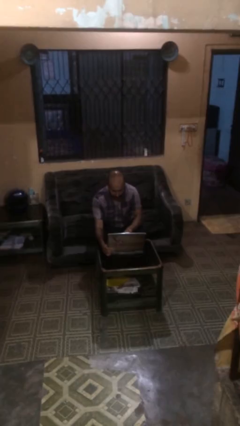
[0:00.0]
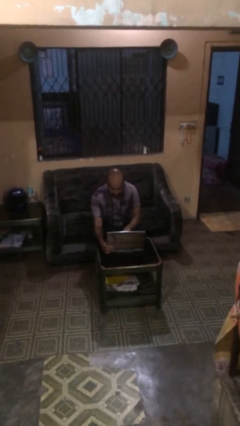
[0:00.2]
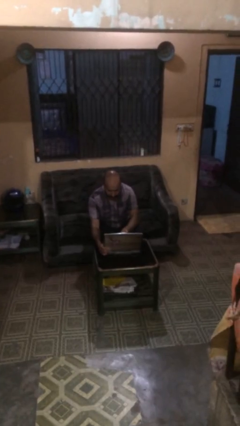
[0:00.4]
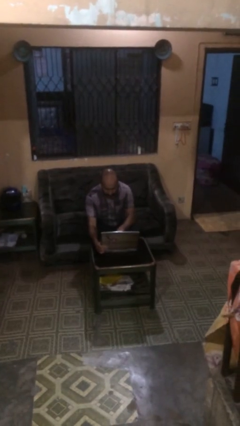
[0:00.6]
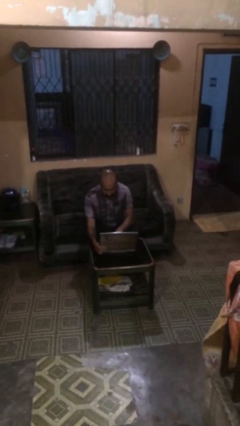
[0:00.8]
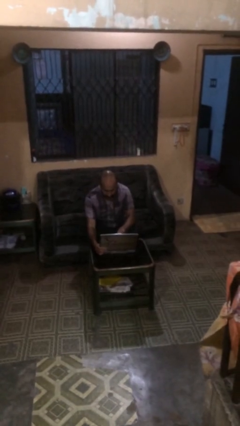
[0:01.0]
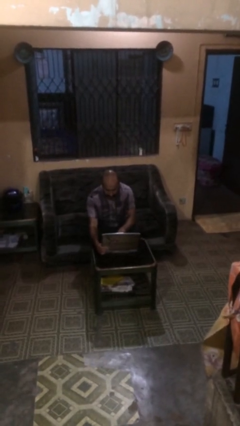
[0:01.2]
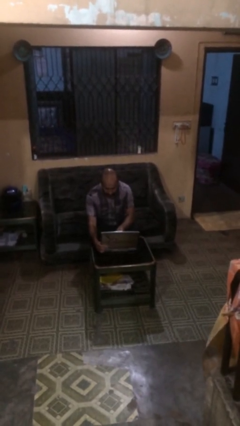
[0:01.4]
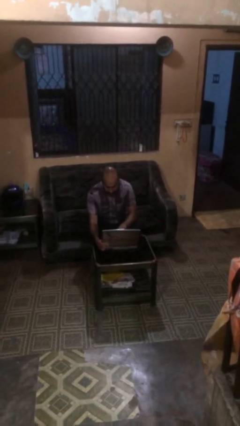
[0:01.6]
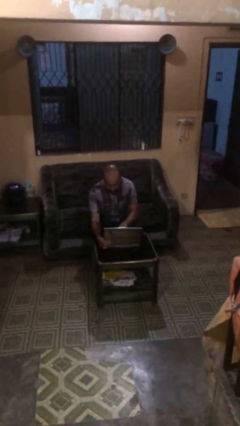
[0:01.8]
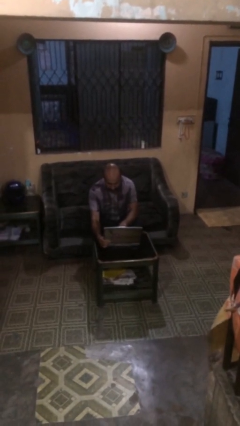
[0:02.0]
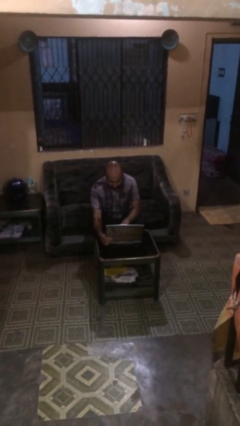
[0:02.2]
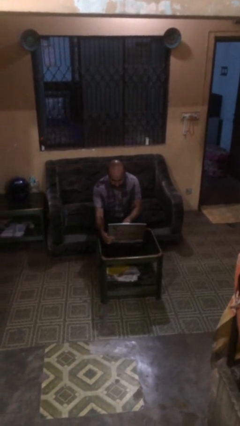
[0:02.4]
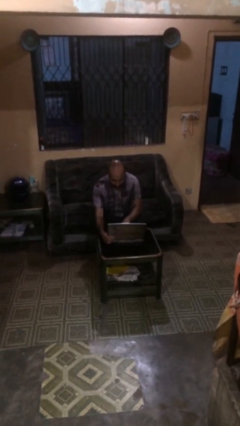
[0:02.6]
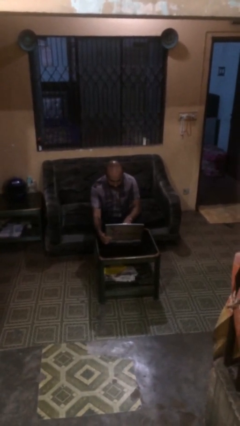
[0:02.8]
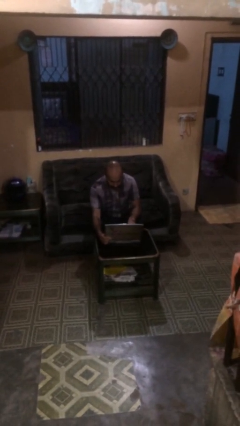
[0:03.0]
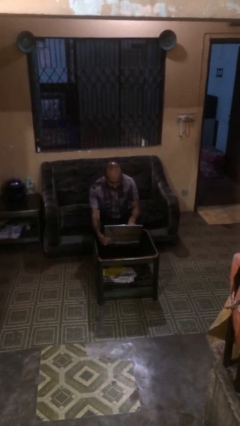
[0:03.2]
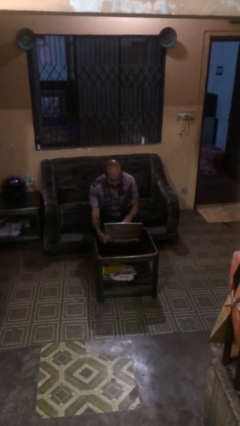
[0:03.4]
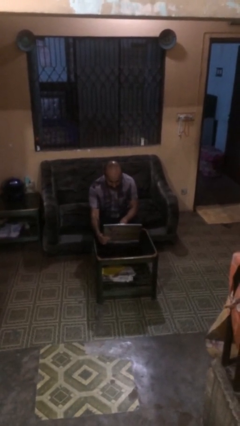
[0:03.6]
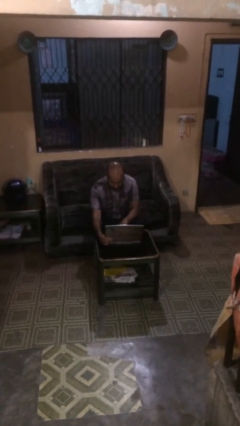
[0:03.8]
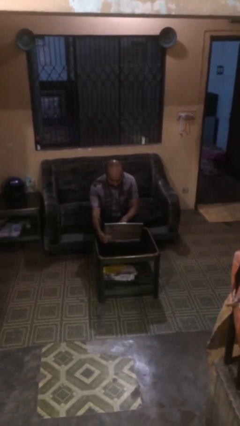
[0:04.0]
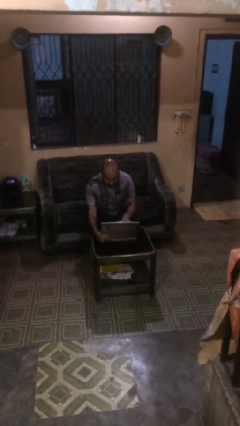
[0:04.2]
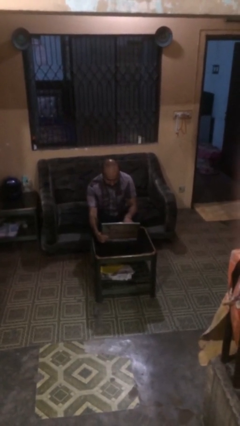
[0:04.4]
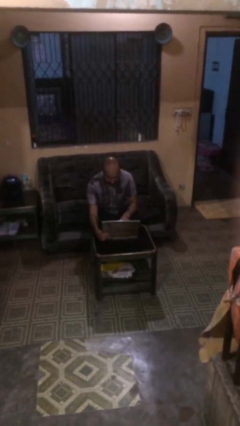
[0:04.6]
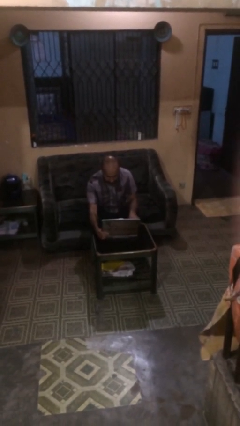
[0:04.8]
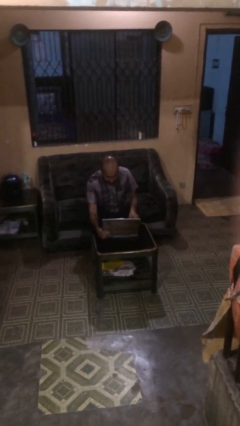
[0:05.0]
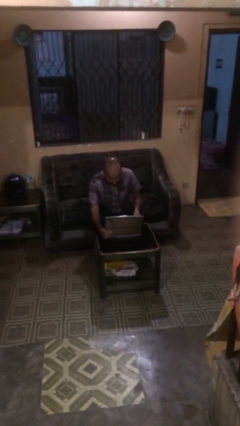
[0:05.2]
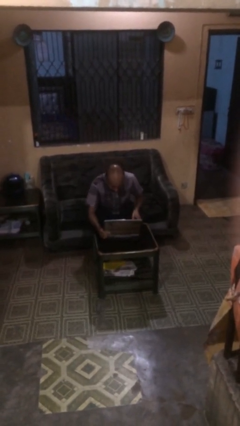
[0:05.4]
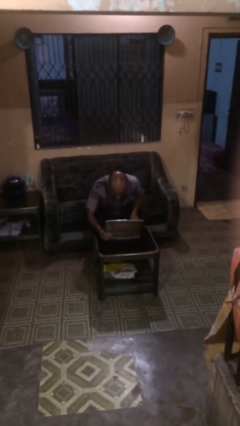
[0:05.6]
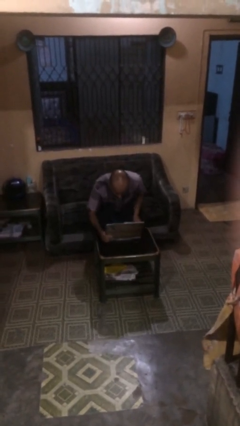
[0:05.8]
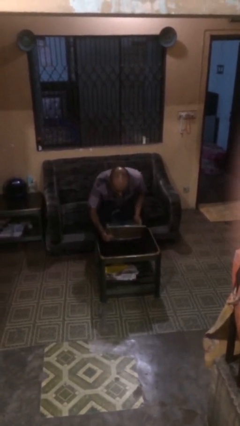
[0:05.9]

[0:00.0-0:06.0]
person interacts with laptop

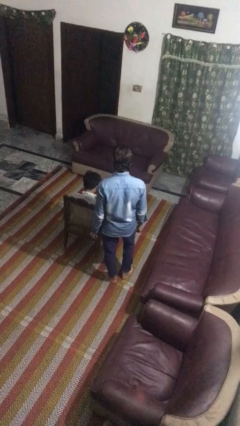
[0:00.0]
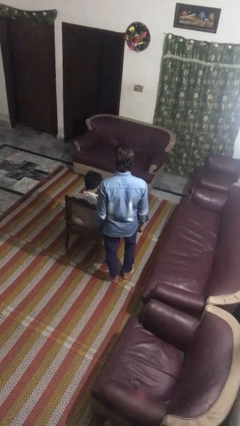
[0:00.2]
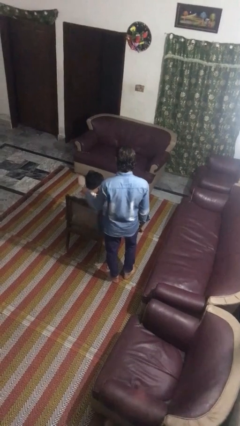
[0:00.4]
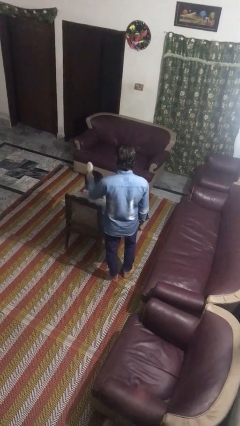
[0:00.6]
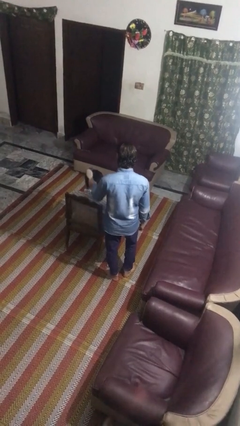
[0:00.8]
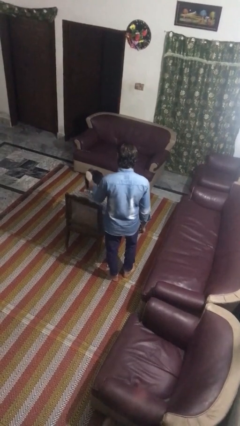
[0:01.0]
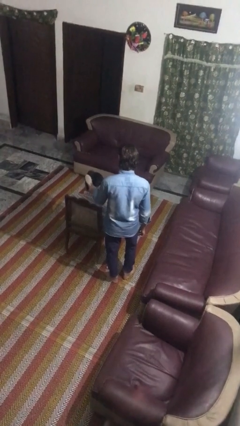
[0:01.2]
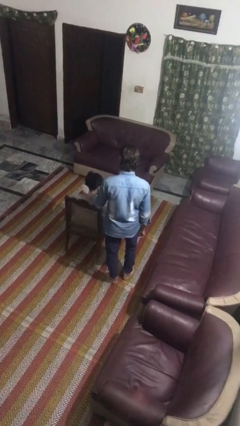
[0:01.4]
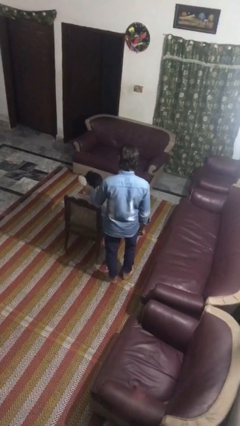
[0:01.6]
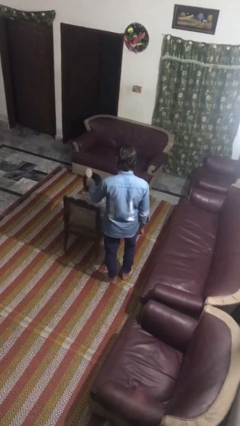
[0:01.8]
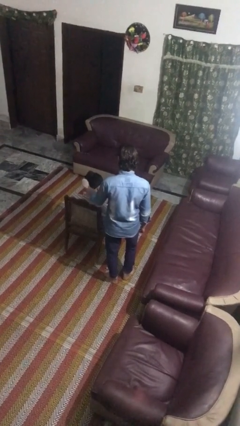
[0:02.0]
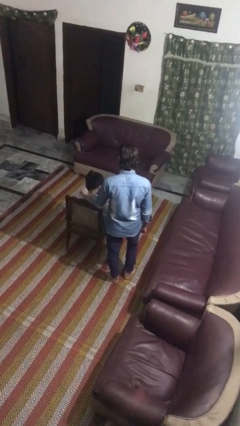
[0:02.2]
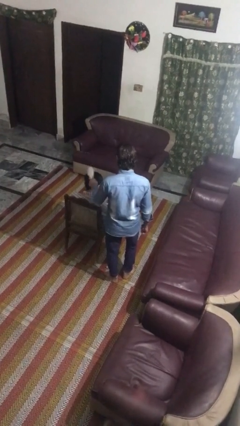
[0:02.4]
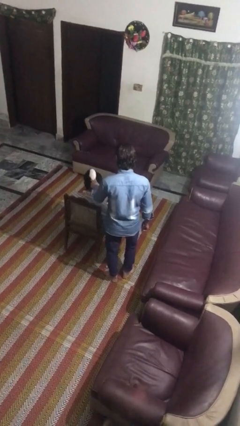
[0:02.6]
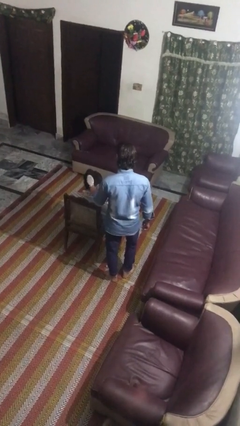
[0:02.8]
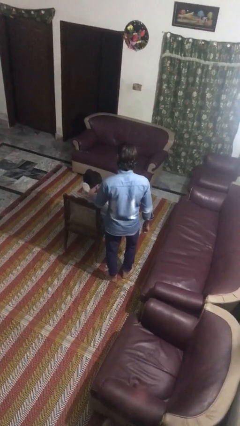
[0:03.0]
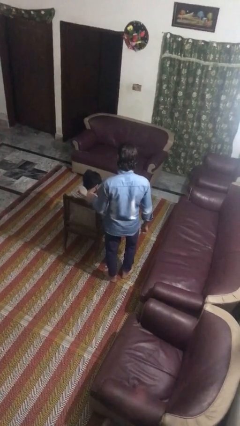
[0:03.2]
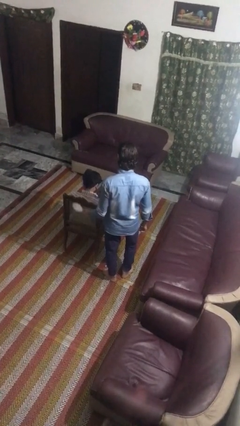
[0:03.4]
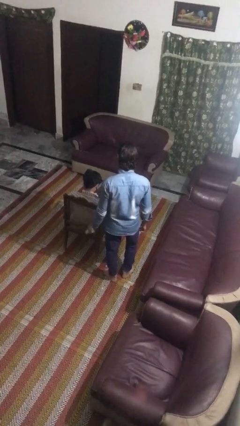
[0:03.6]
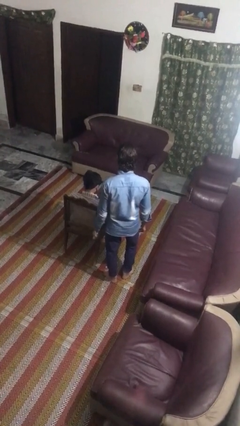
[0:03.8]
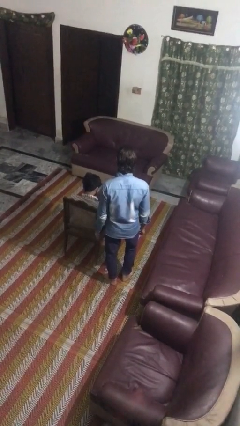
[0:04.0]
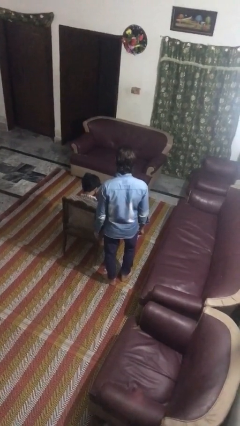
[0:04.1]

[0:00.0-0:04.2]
person brushes hair of person

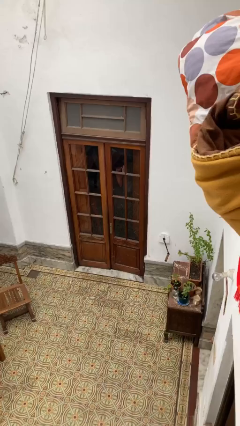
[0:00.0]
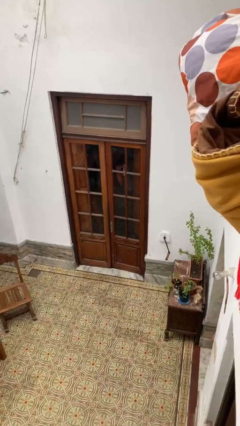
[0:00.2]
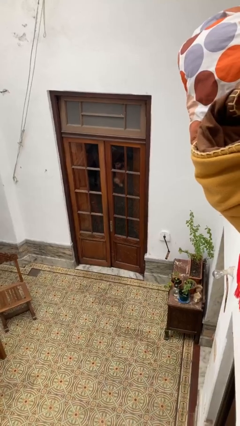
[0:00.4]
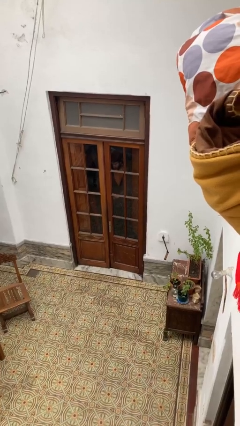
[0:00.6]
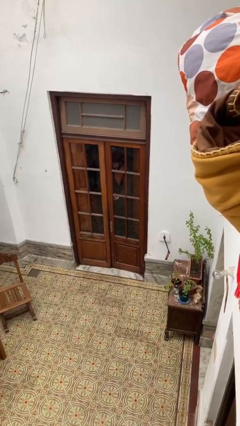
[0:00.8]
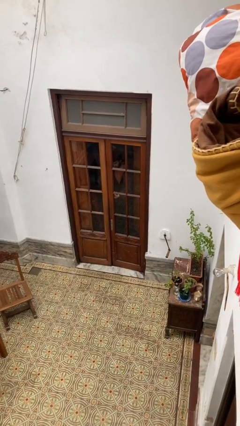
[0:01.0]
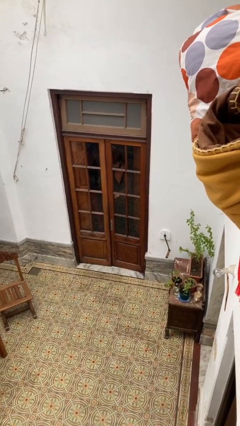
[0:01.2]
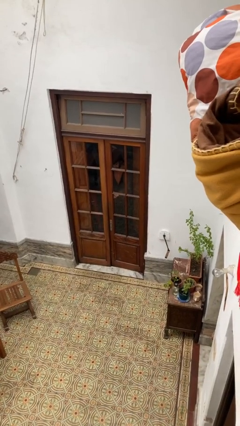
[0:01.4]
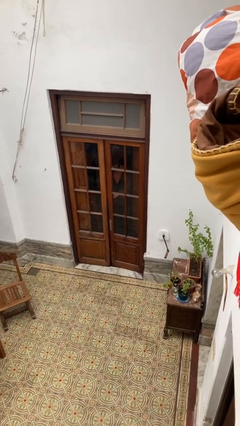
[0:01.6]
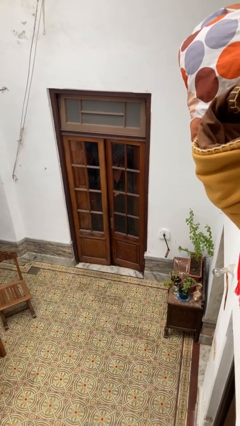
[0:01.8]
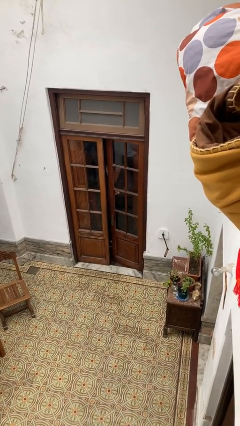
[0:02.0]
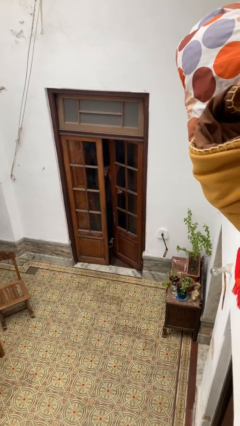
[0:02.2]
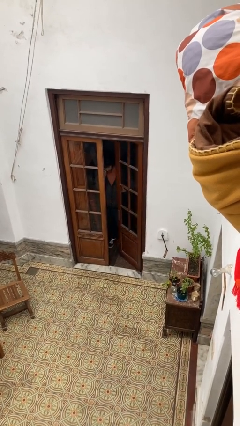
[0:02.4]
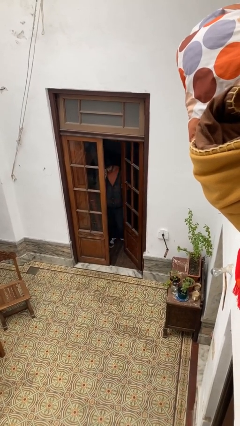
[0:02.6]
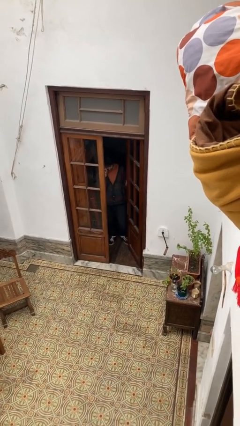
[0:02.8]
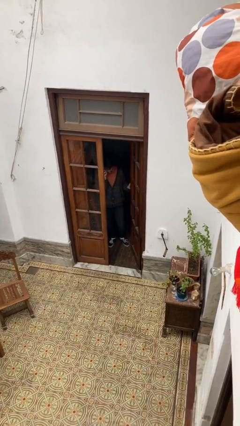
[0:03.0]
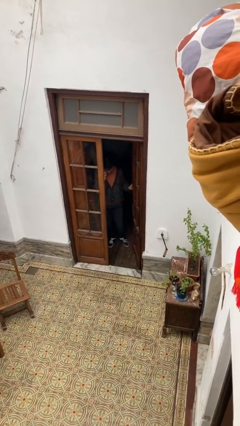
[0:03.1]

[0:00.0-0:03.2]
person opens facility door

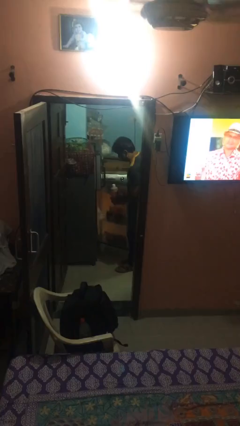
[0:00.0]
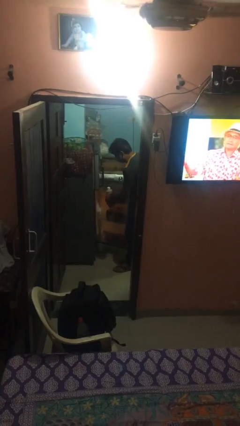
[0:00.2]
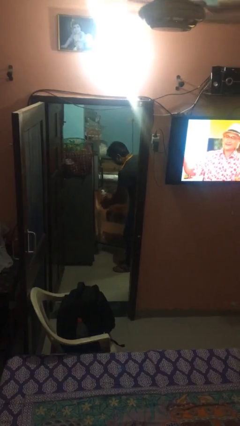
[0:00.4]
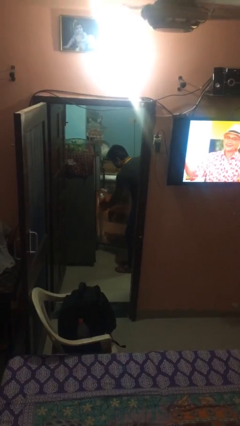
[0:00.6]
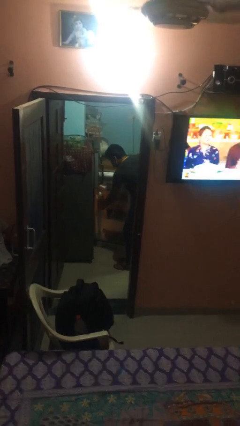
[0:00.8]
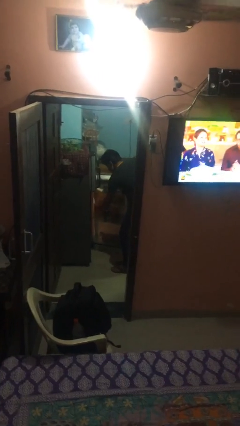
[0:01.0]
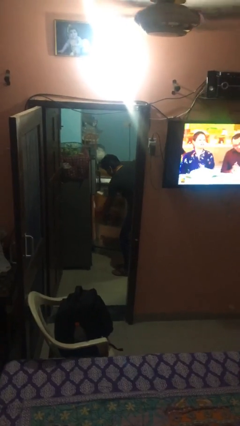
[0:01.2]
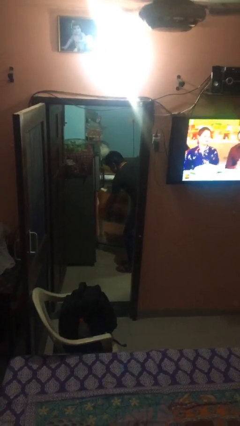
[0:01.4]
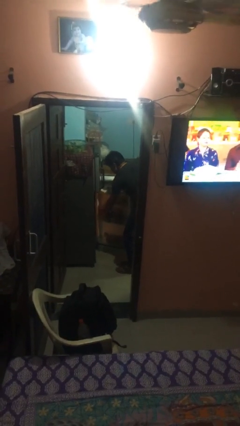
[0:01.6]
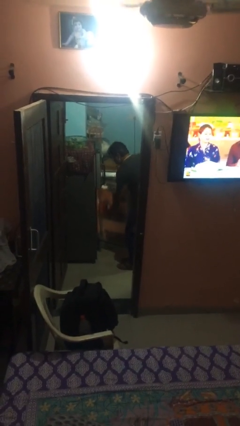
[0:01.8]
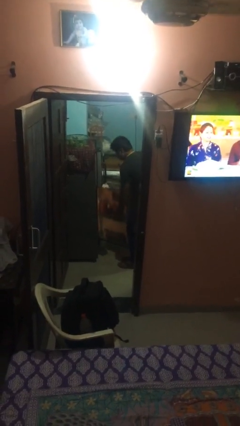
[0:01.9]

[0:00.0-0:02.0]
person puts object into refrigerator

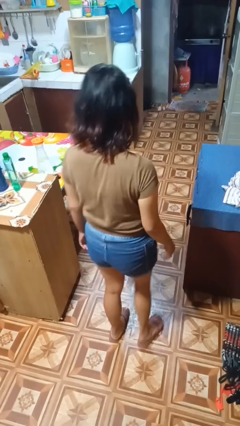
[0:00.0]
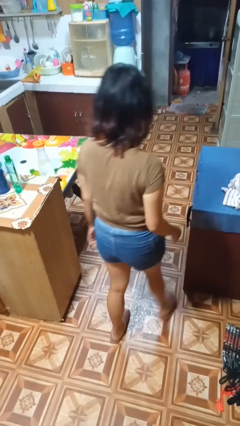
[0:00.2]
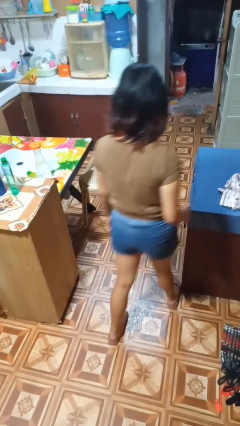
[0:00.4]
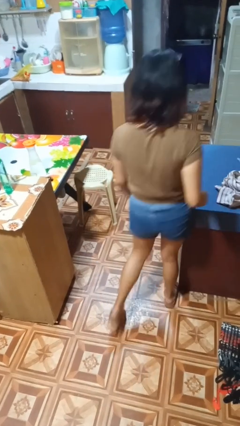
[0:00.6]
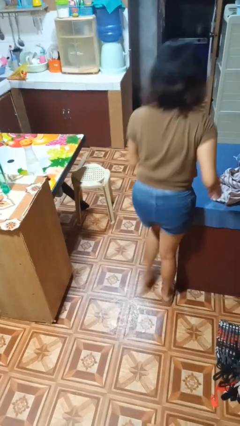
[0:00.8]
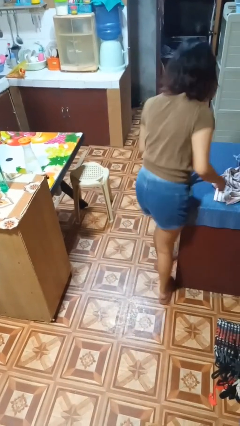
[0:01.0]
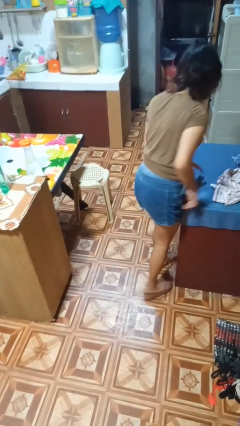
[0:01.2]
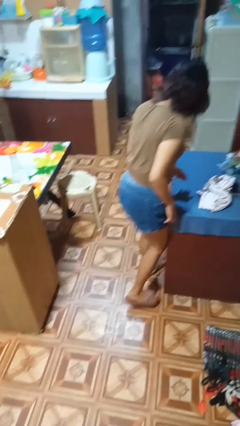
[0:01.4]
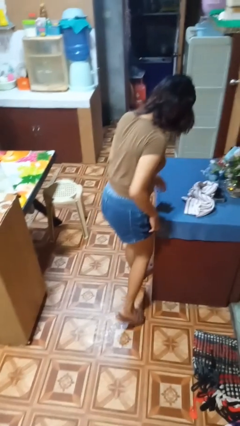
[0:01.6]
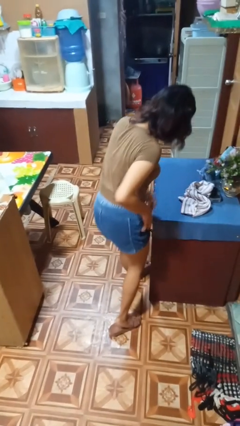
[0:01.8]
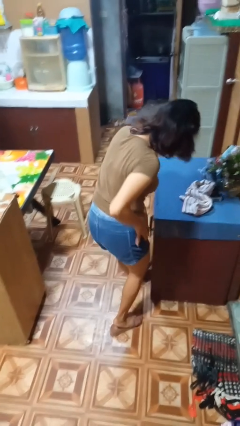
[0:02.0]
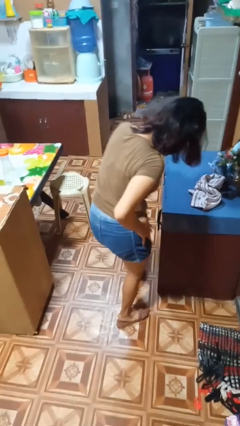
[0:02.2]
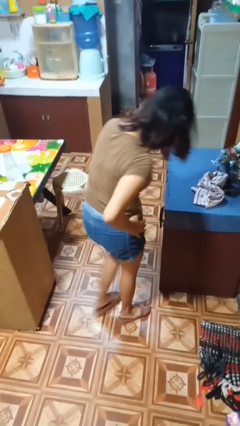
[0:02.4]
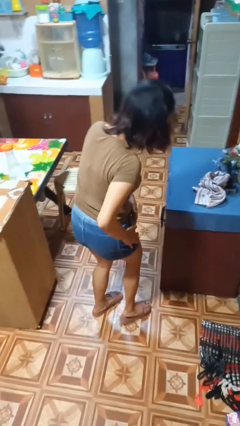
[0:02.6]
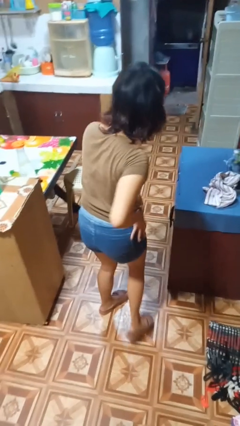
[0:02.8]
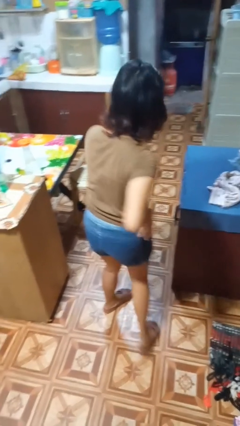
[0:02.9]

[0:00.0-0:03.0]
person bumps into table
